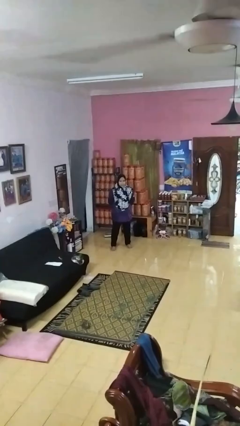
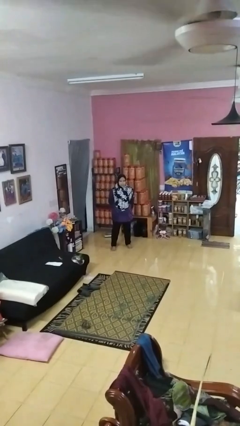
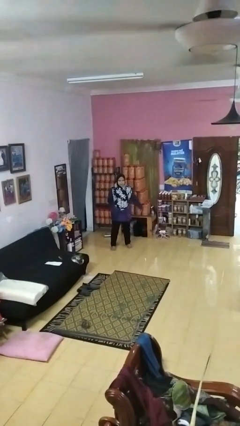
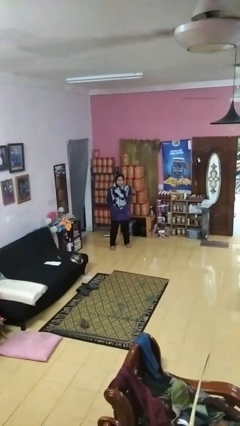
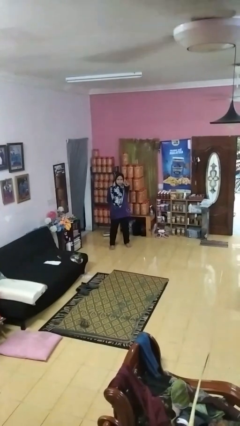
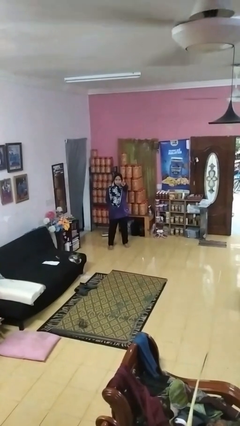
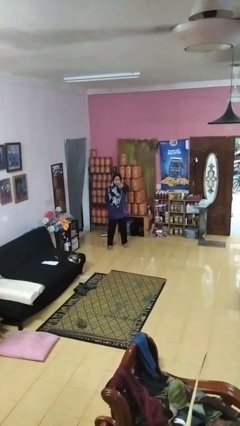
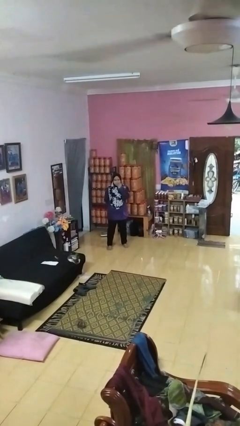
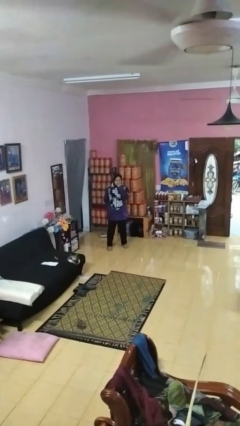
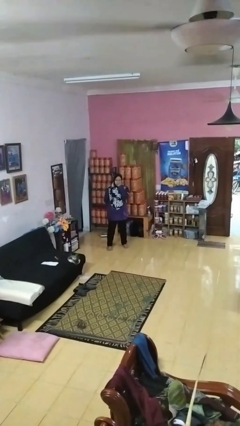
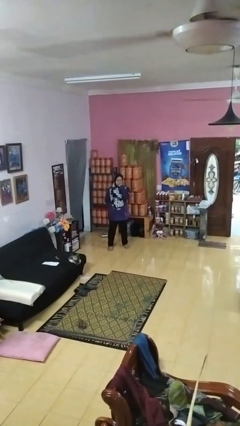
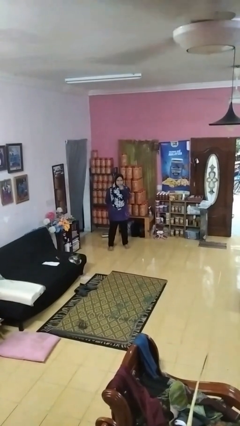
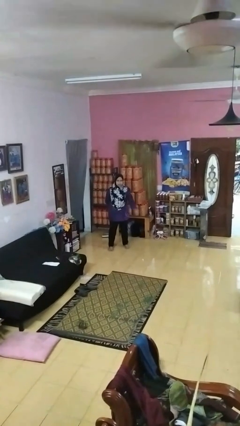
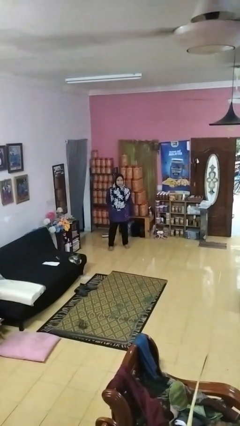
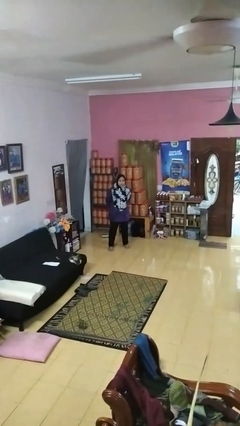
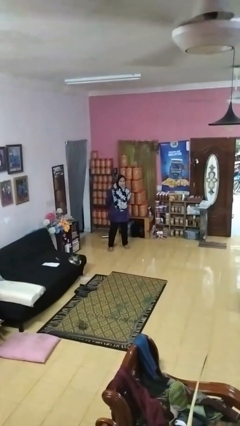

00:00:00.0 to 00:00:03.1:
person gestures watch closely

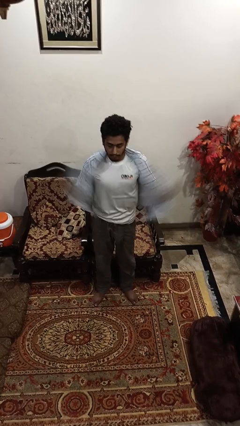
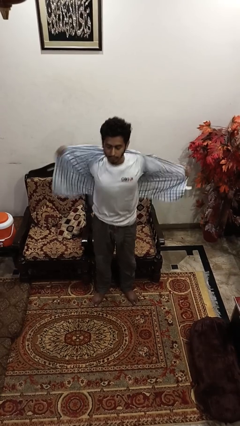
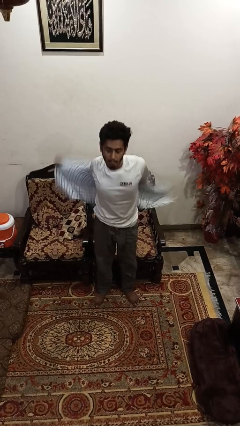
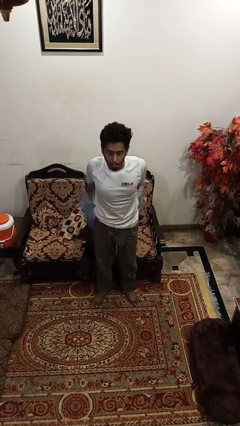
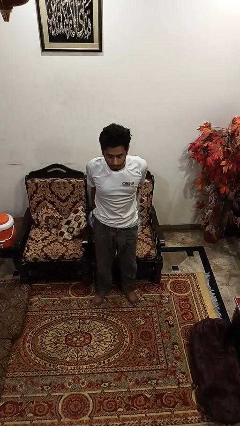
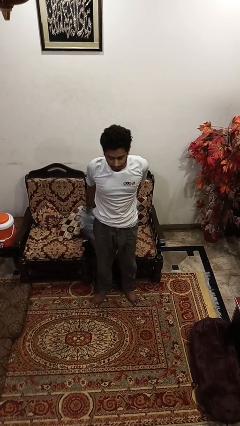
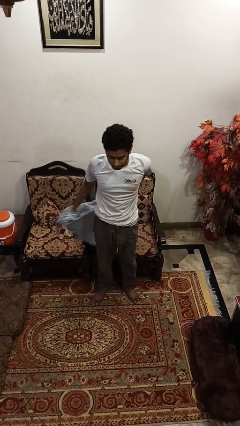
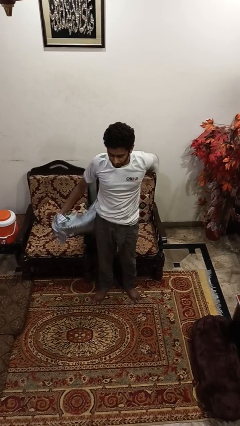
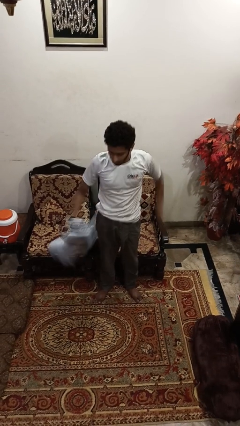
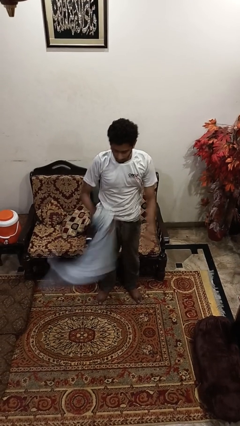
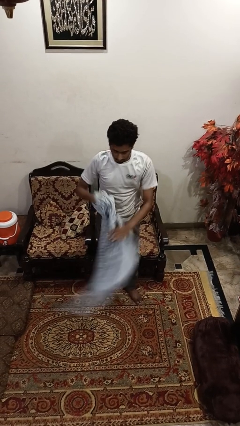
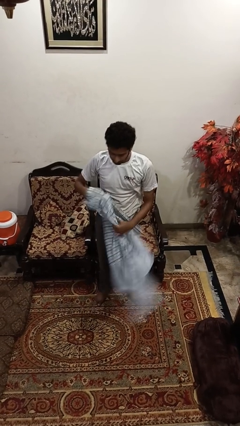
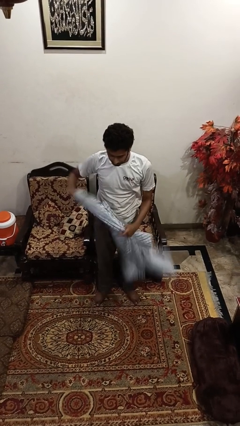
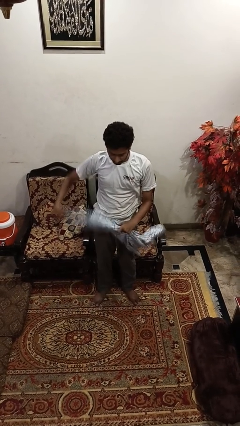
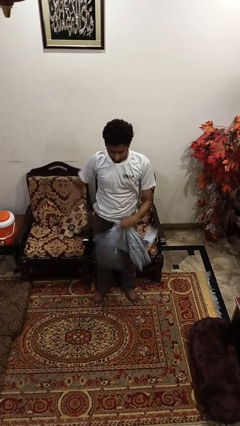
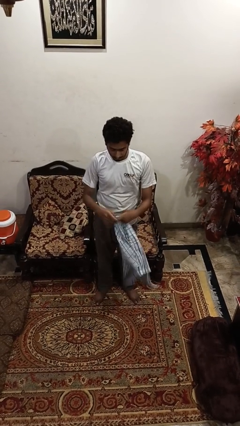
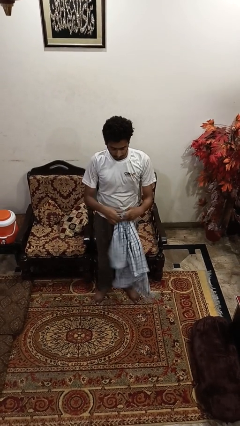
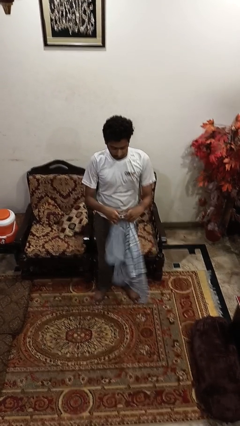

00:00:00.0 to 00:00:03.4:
person takes off shirt

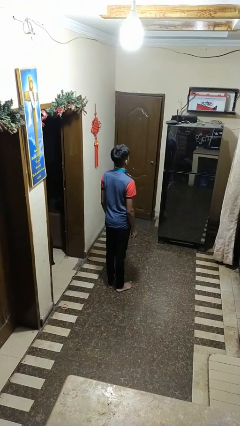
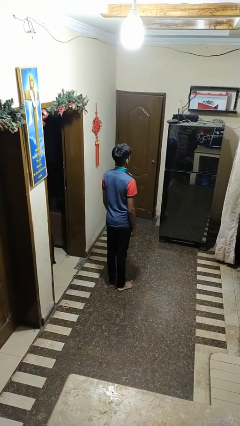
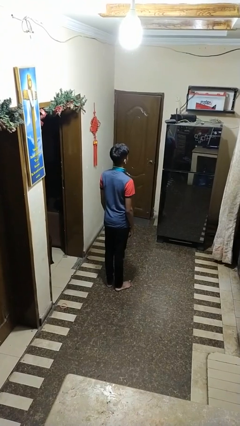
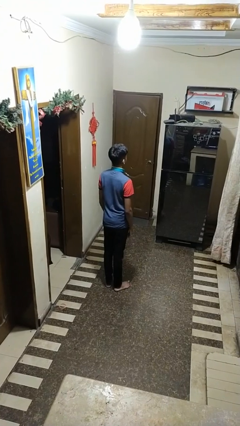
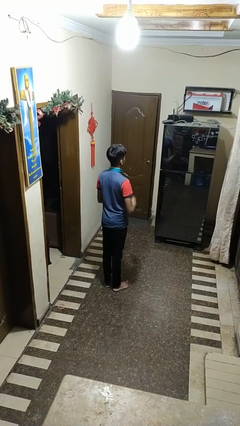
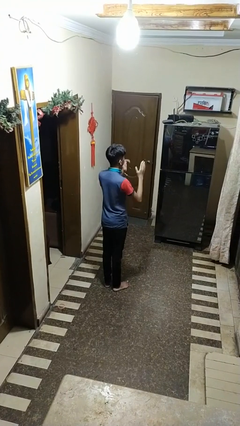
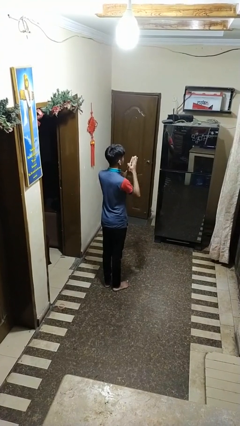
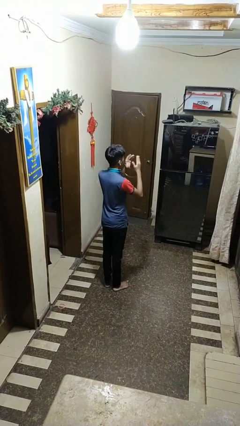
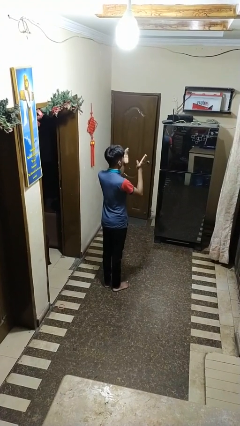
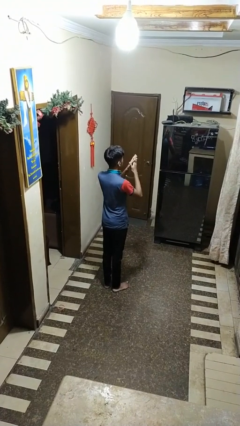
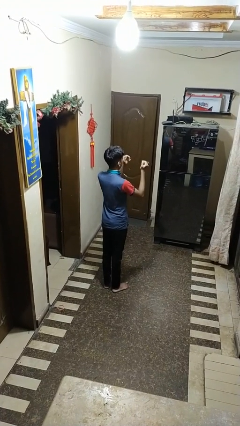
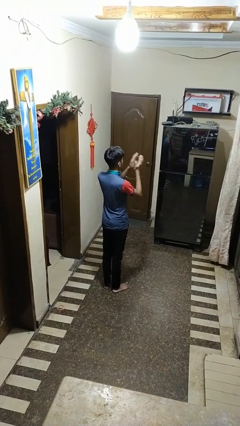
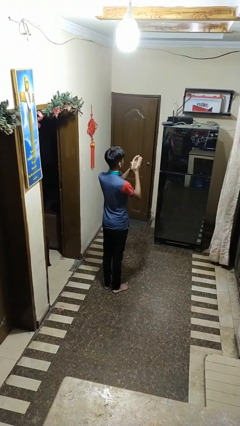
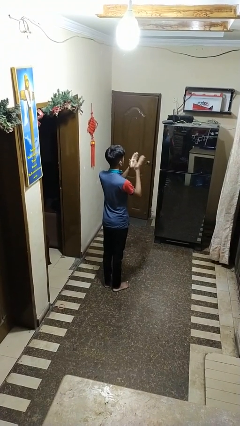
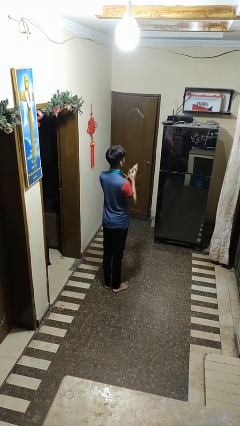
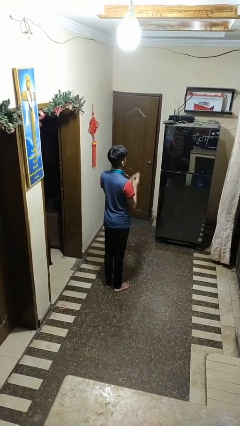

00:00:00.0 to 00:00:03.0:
person claps hands

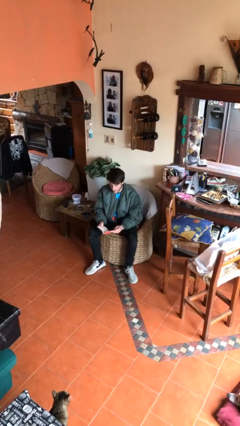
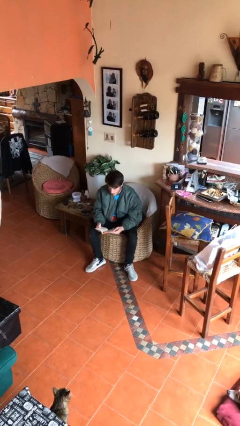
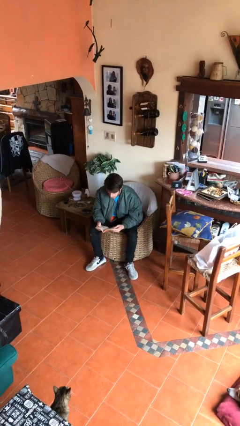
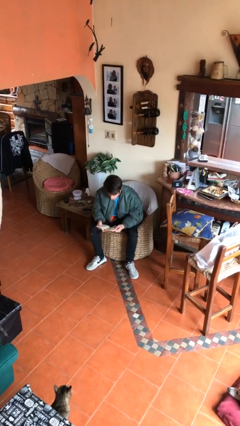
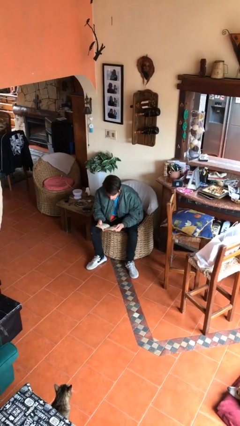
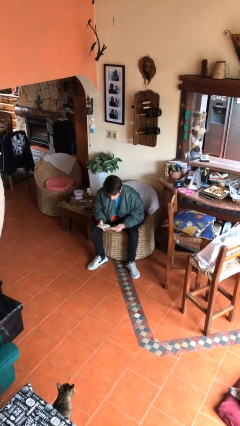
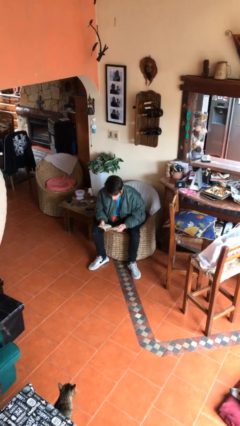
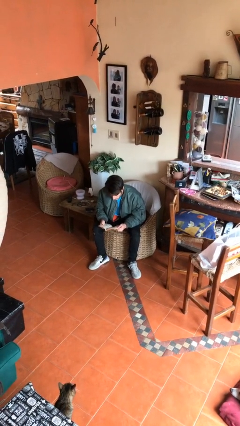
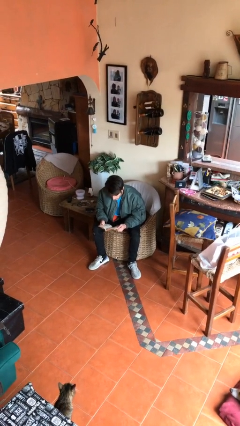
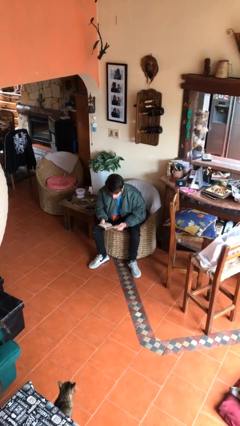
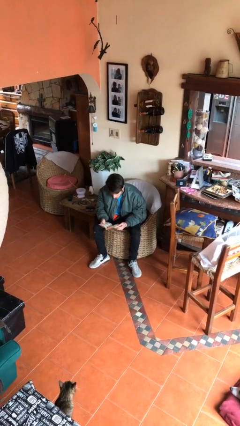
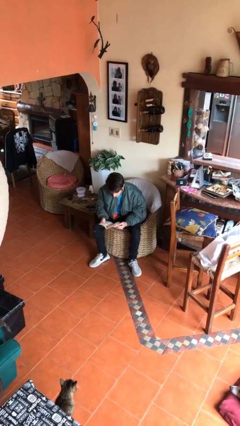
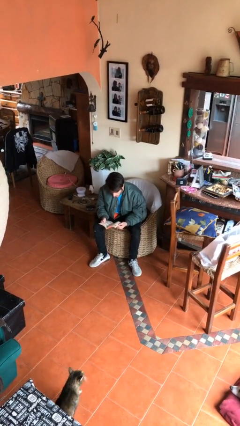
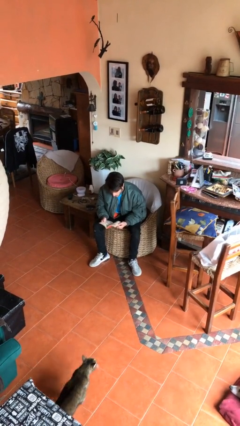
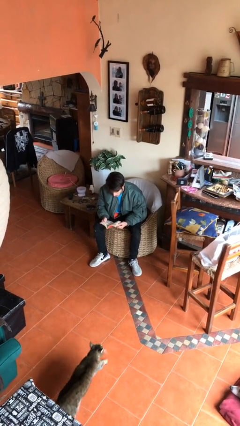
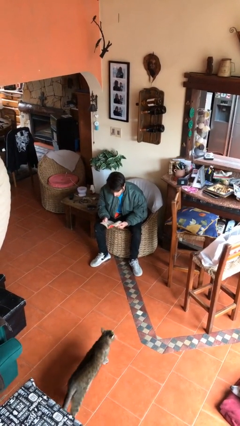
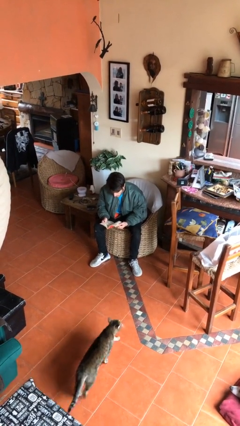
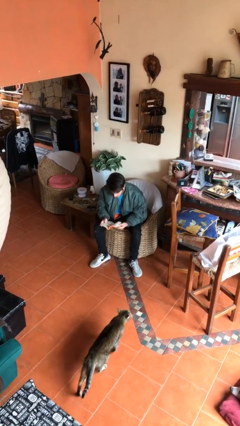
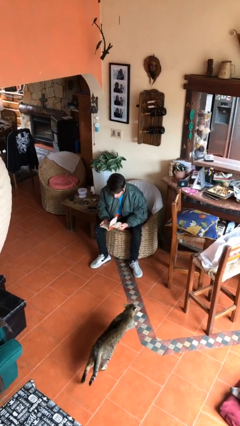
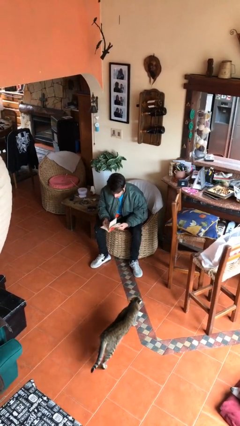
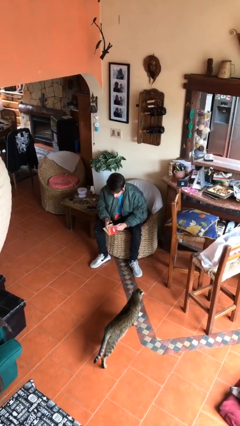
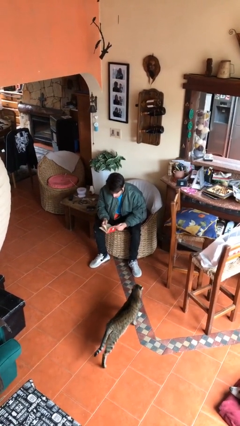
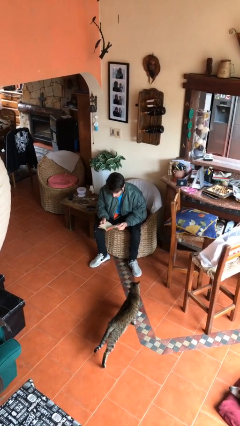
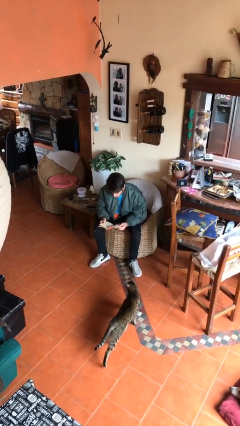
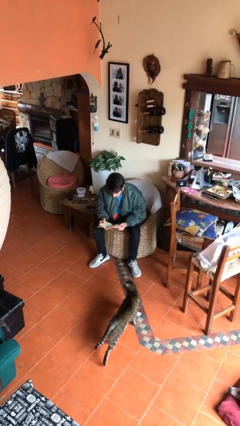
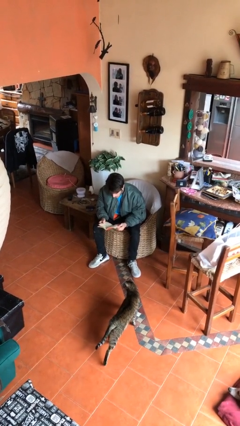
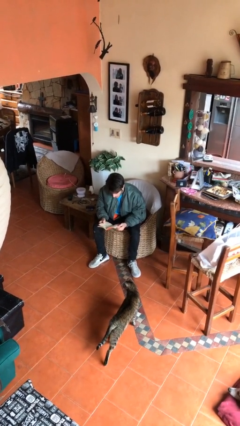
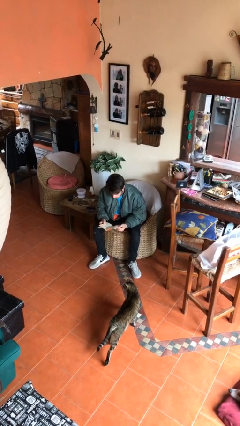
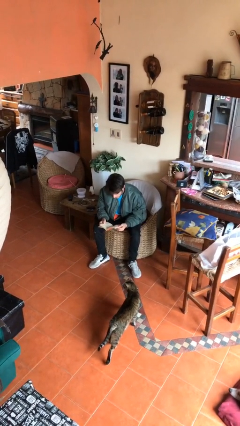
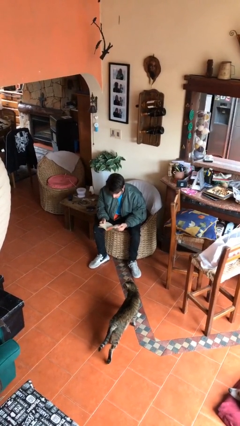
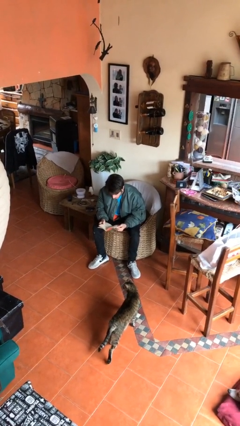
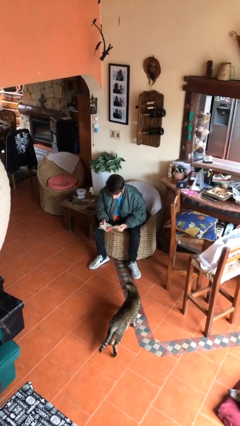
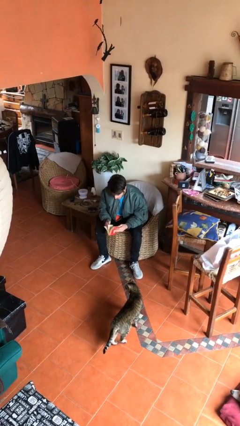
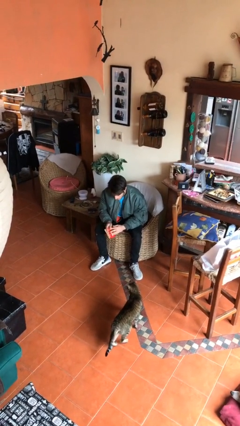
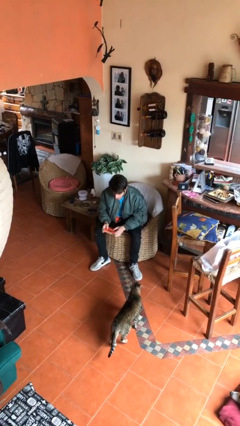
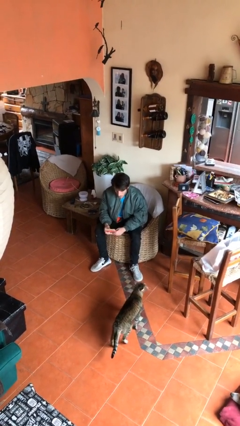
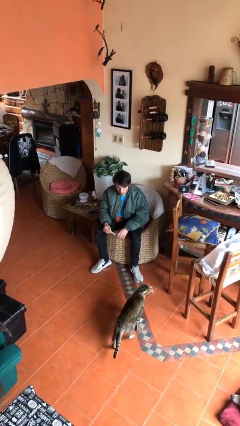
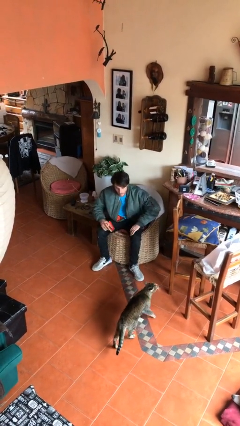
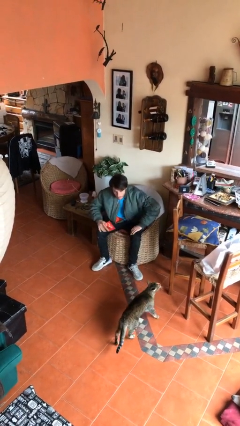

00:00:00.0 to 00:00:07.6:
person reads document

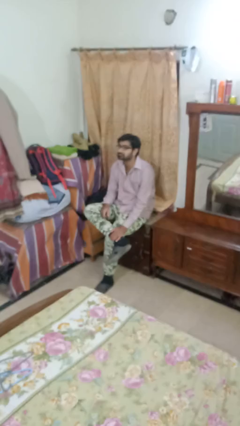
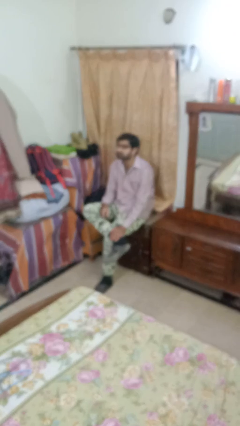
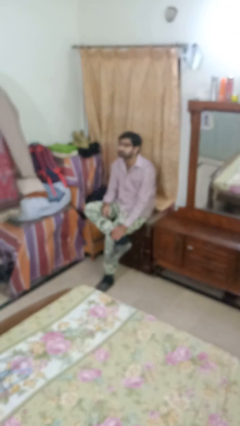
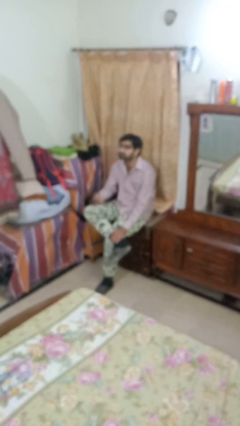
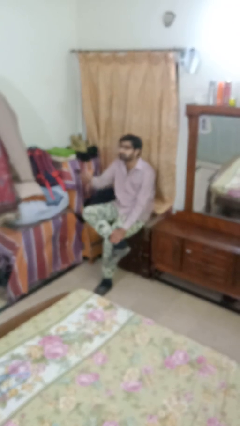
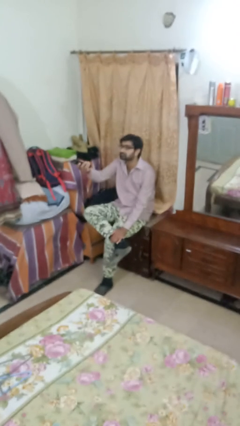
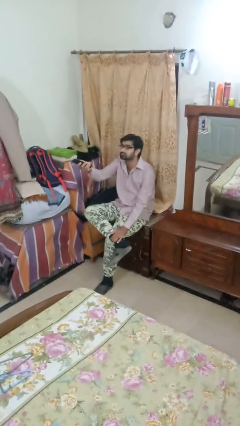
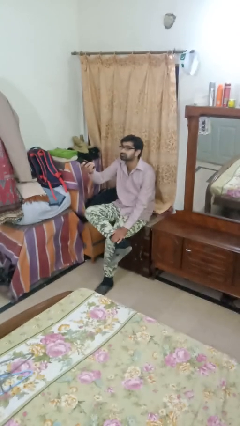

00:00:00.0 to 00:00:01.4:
person uses television remote
